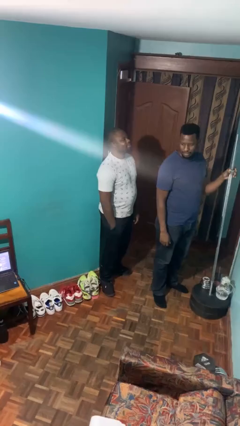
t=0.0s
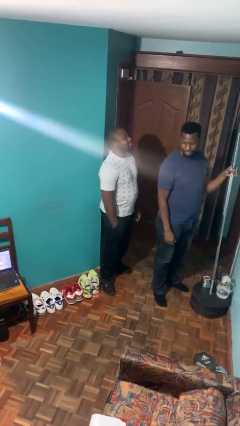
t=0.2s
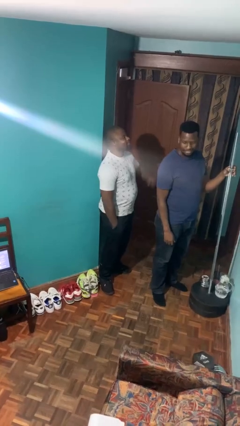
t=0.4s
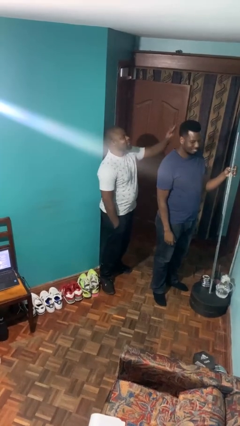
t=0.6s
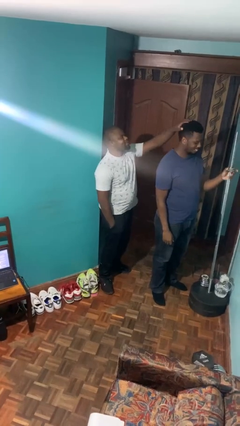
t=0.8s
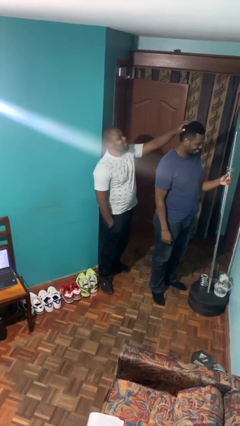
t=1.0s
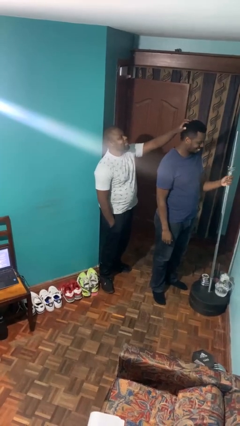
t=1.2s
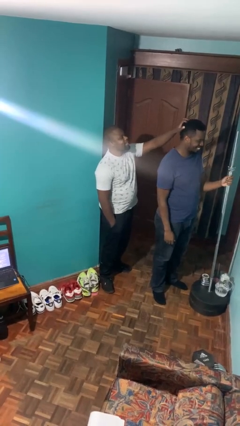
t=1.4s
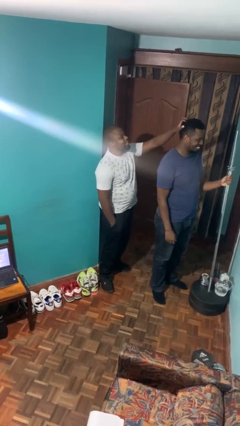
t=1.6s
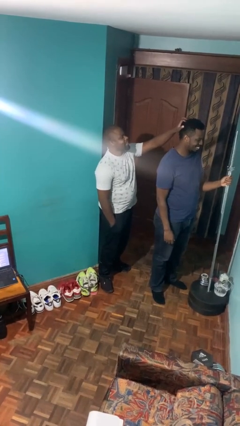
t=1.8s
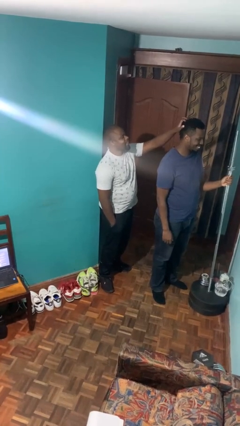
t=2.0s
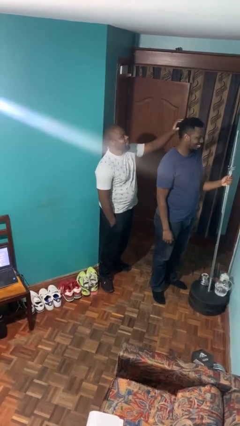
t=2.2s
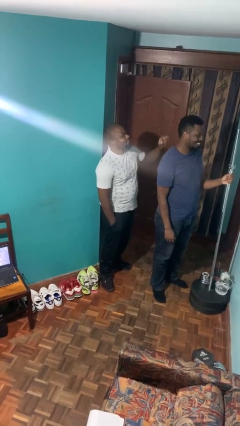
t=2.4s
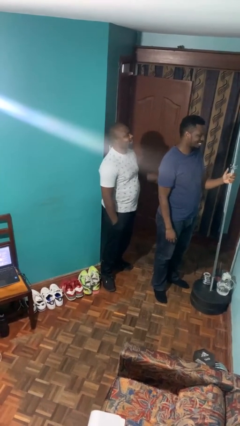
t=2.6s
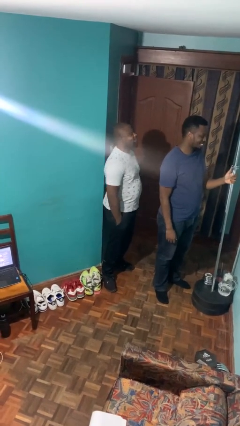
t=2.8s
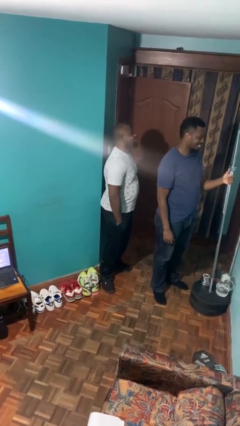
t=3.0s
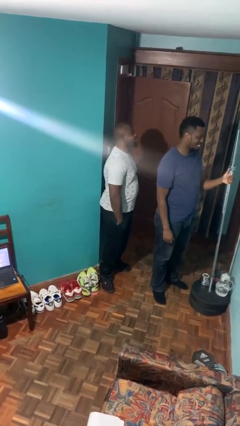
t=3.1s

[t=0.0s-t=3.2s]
person grabs person by hair

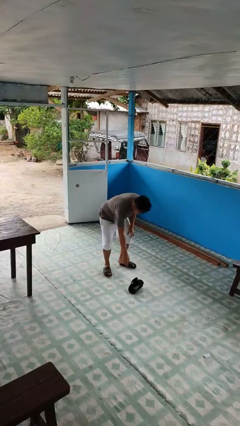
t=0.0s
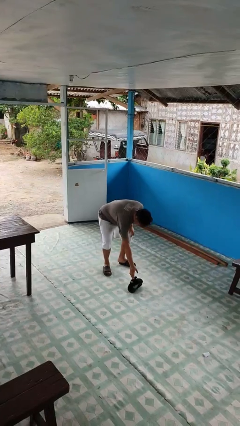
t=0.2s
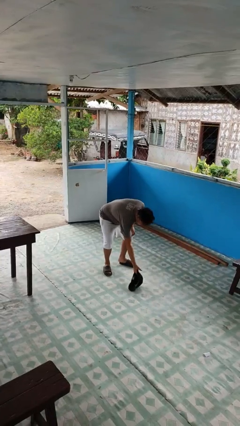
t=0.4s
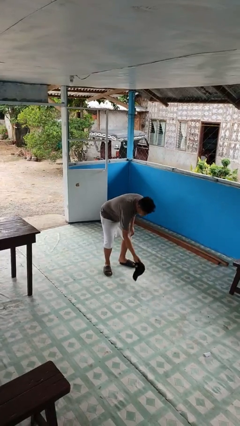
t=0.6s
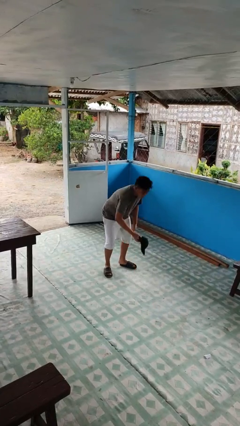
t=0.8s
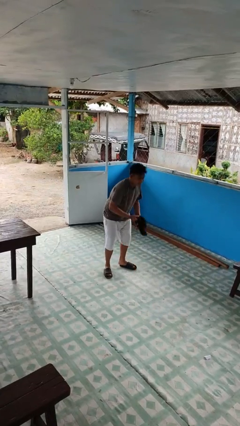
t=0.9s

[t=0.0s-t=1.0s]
person picks up object from floor

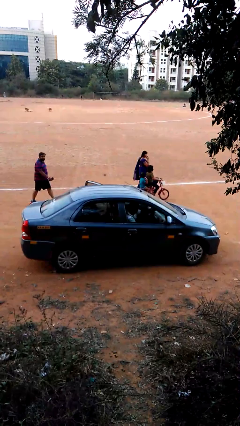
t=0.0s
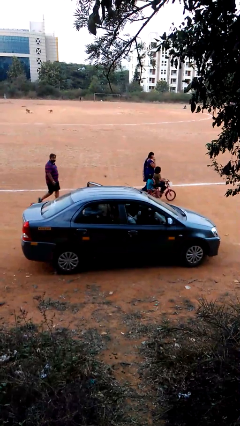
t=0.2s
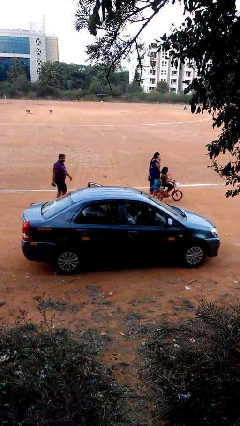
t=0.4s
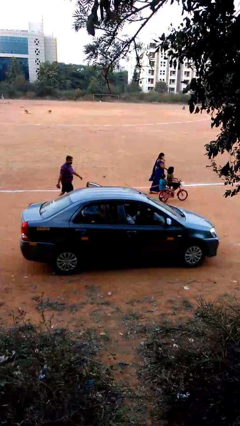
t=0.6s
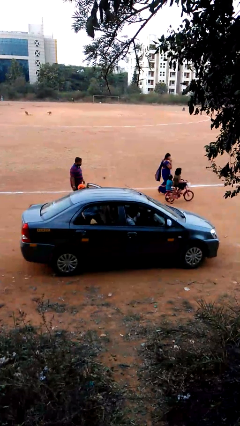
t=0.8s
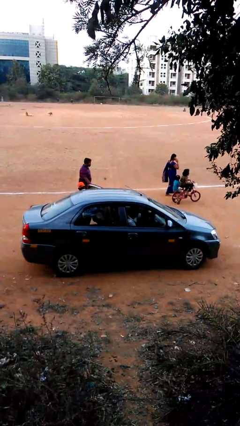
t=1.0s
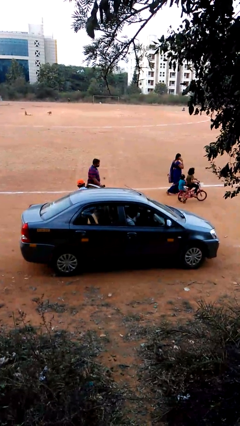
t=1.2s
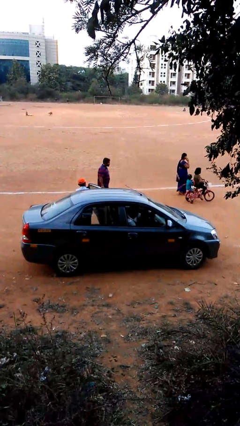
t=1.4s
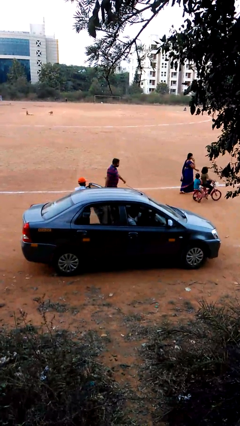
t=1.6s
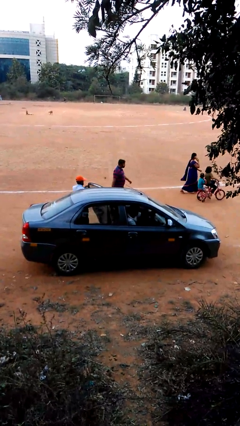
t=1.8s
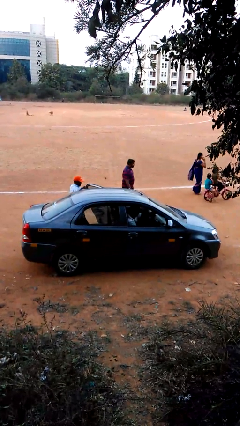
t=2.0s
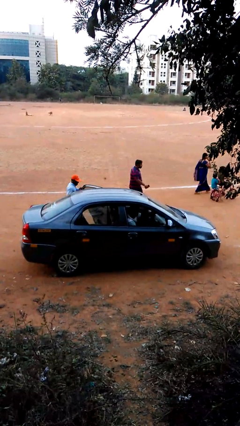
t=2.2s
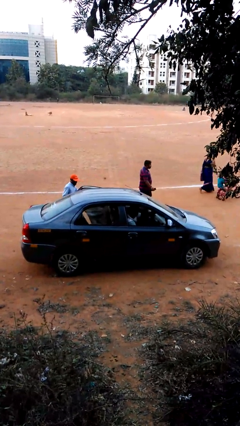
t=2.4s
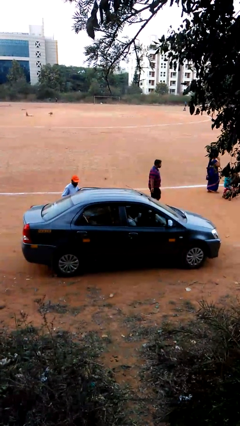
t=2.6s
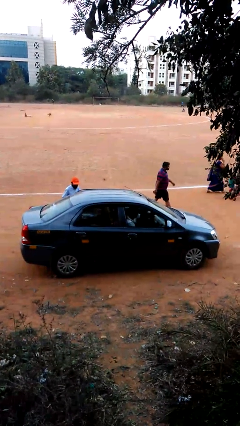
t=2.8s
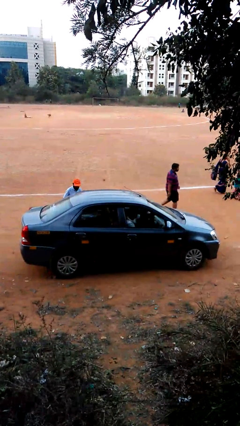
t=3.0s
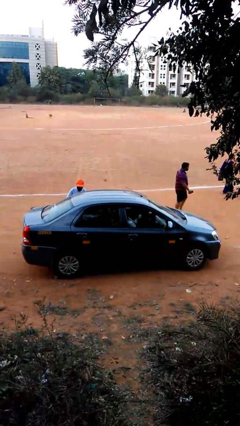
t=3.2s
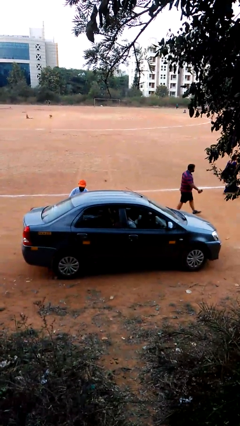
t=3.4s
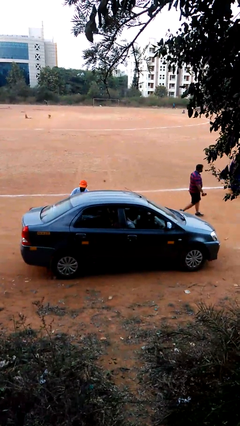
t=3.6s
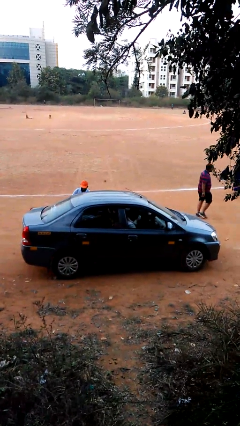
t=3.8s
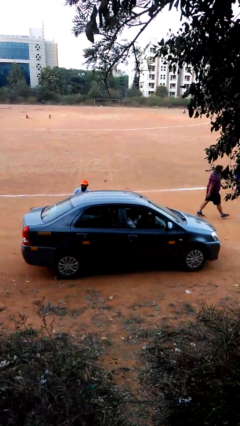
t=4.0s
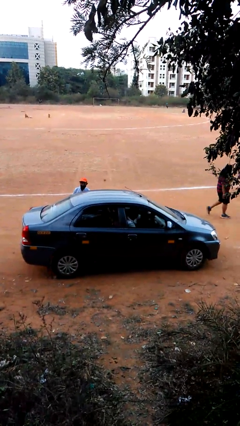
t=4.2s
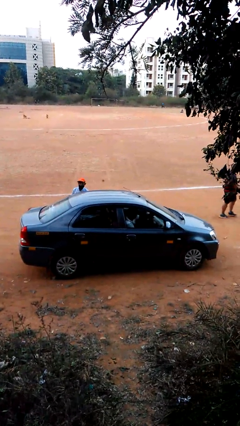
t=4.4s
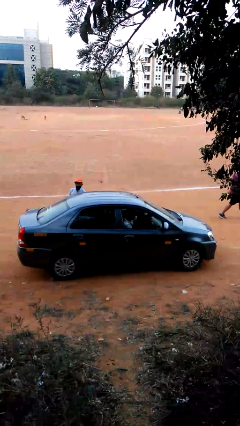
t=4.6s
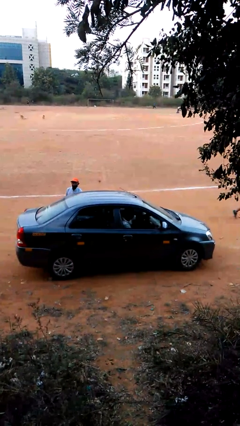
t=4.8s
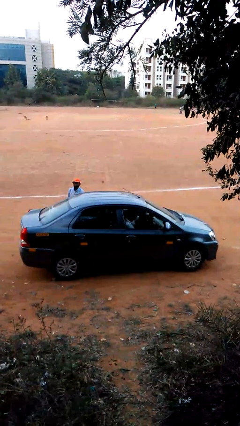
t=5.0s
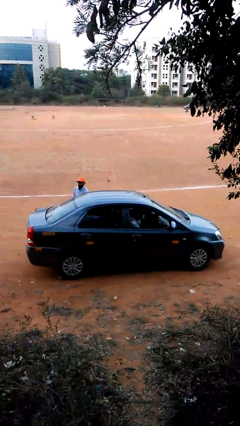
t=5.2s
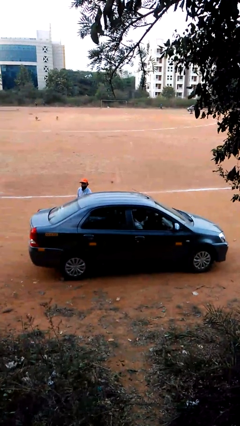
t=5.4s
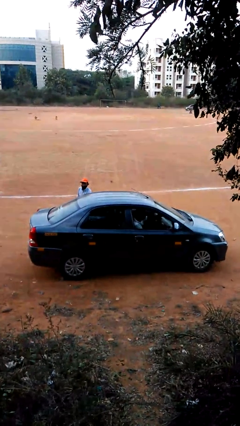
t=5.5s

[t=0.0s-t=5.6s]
car drops off person

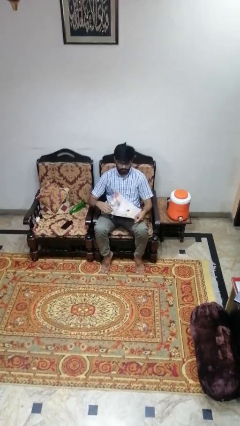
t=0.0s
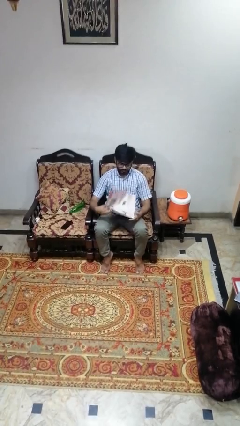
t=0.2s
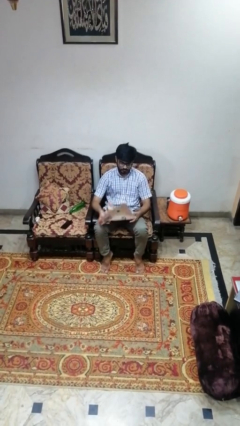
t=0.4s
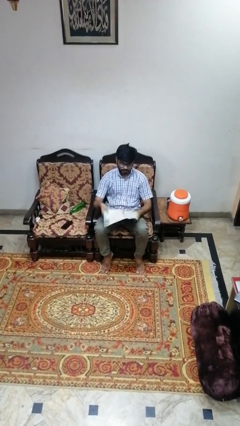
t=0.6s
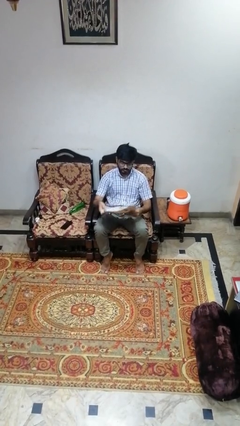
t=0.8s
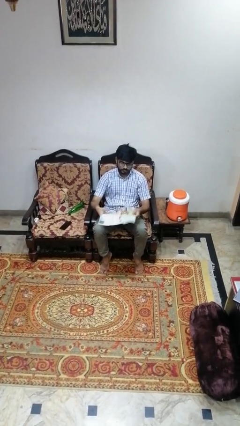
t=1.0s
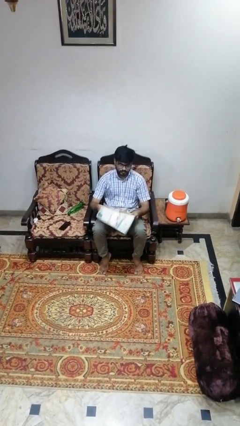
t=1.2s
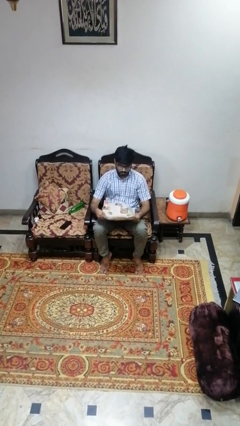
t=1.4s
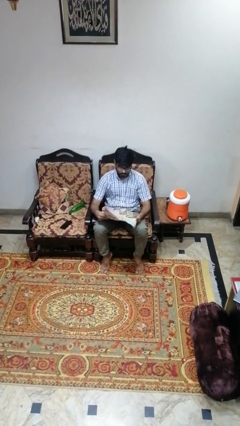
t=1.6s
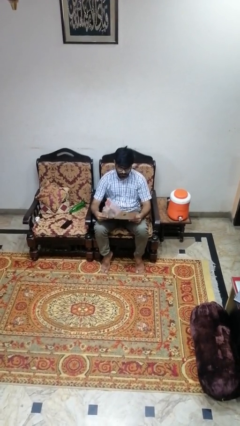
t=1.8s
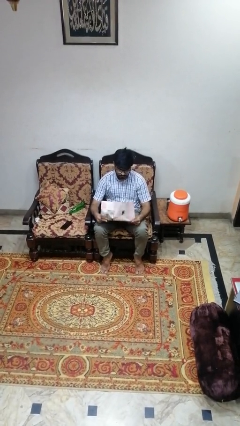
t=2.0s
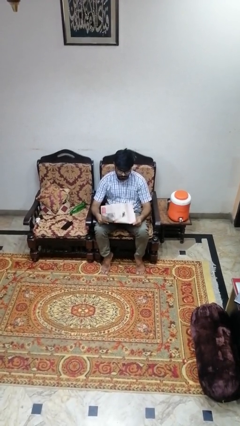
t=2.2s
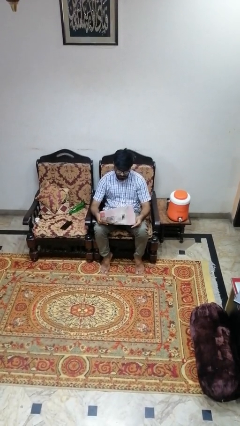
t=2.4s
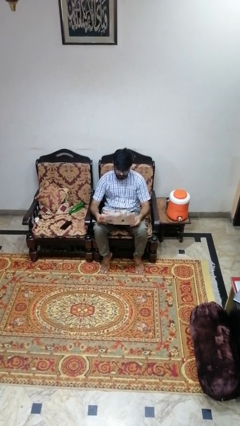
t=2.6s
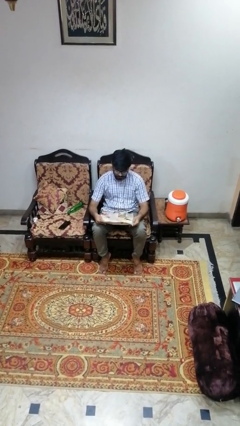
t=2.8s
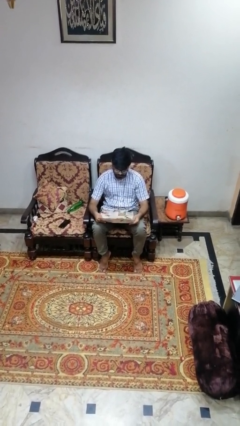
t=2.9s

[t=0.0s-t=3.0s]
person reads newspaper

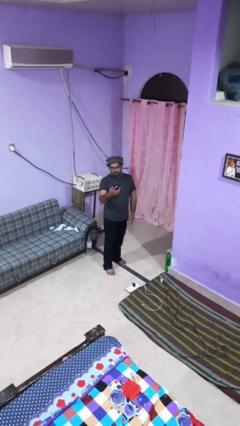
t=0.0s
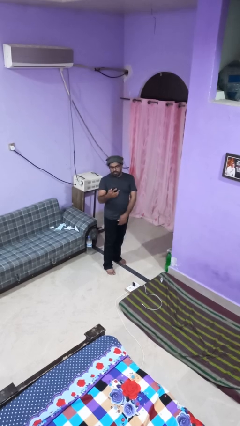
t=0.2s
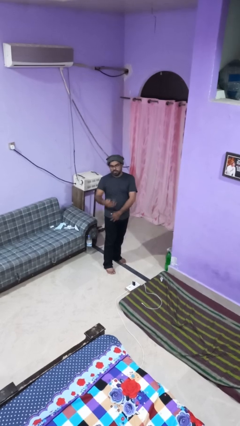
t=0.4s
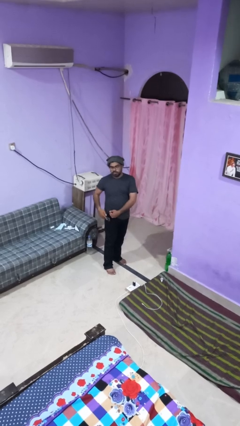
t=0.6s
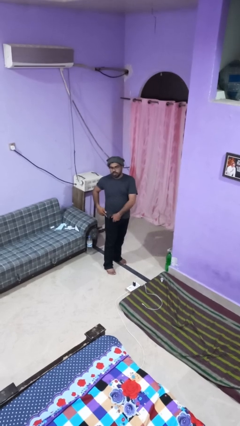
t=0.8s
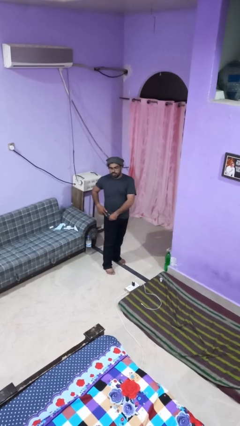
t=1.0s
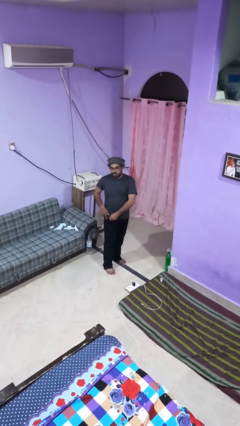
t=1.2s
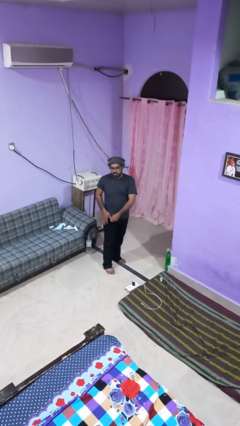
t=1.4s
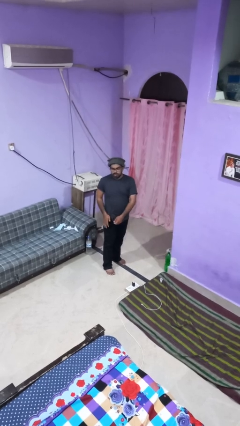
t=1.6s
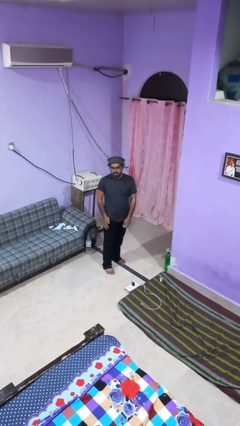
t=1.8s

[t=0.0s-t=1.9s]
person puts phone into pocket

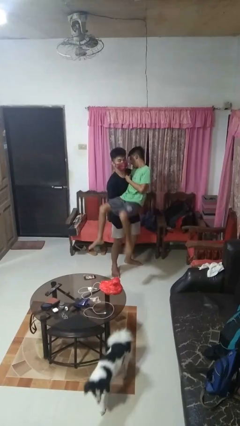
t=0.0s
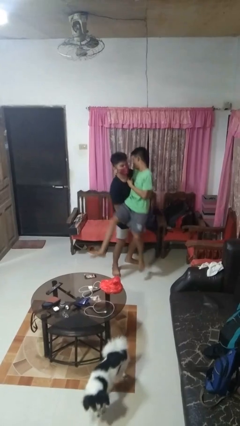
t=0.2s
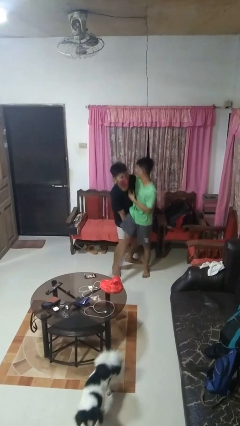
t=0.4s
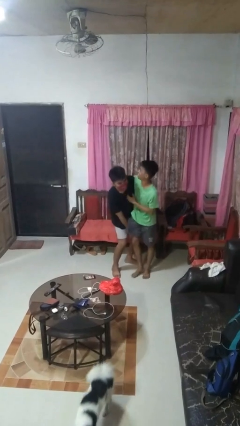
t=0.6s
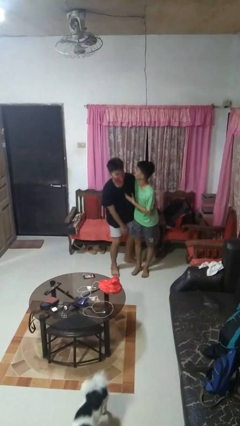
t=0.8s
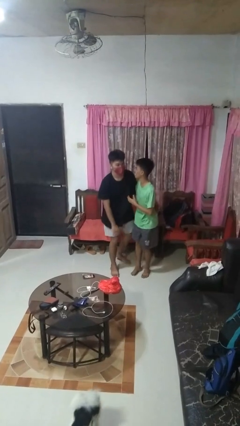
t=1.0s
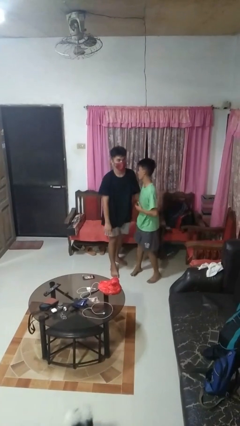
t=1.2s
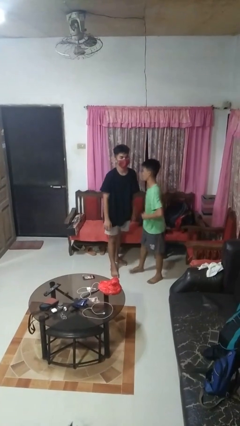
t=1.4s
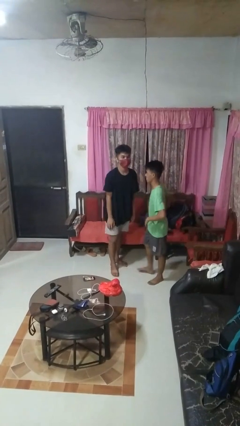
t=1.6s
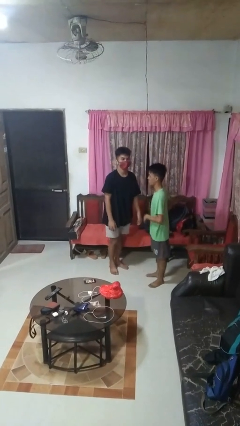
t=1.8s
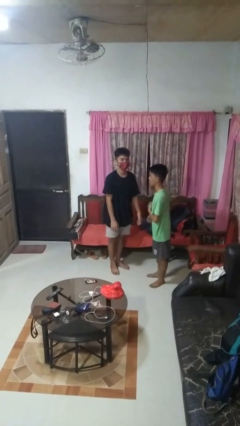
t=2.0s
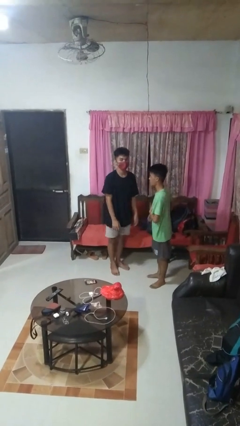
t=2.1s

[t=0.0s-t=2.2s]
person puts down person
